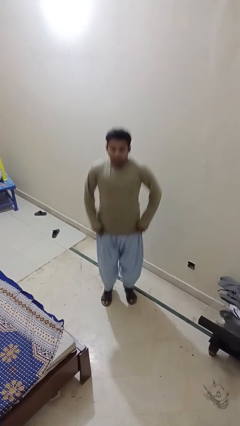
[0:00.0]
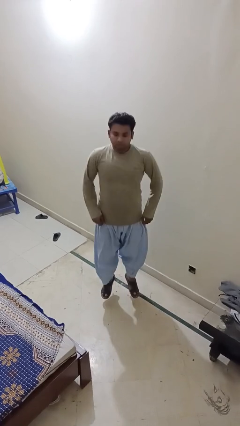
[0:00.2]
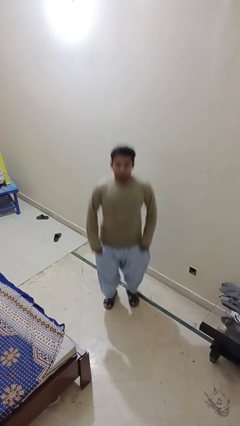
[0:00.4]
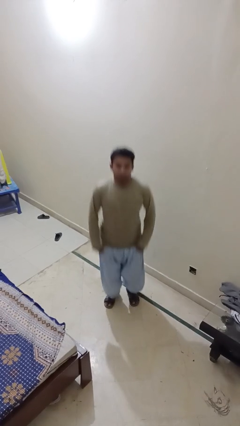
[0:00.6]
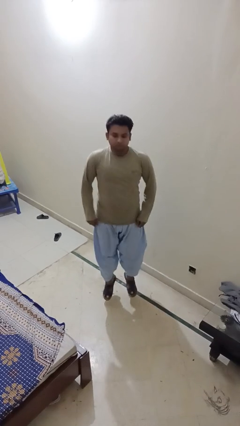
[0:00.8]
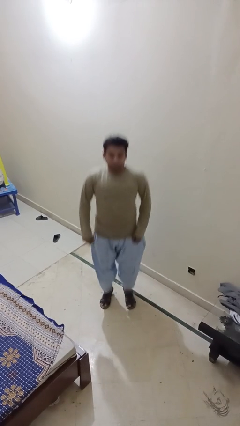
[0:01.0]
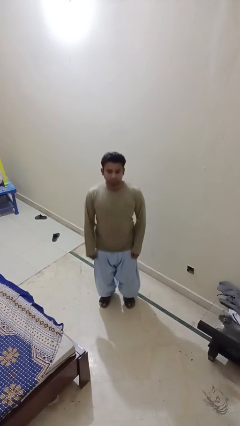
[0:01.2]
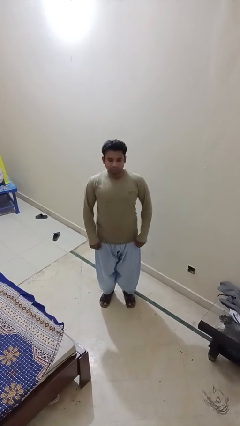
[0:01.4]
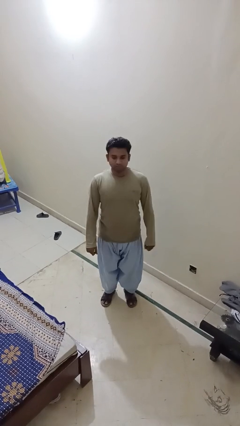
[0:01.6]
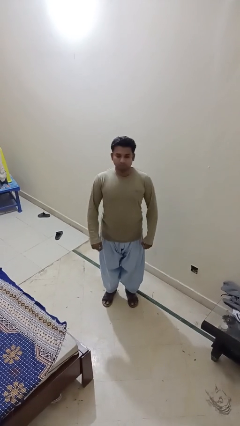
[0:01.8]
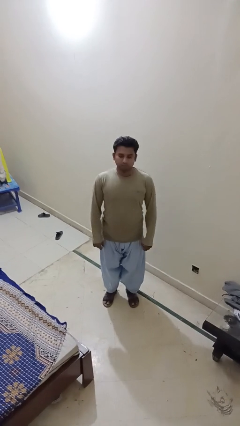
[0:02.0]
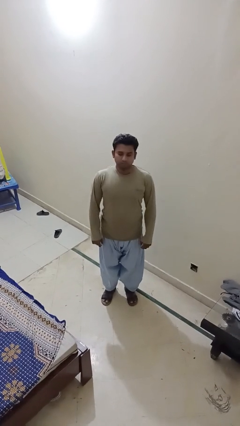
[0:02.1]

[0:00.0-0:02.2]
person jumps

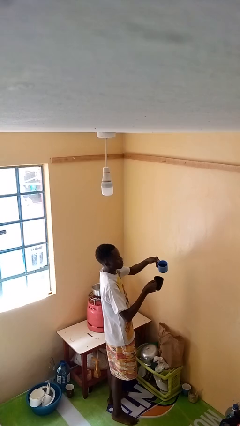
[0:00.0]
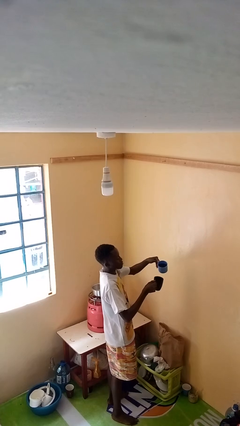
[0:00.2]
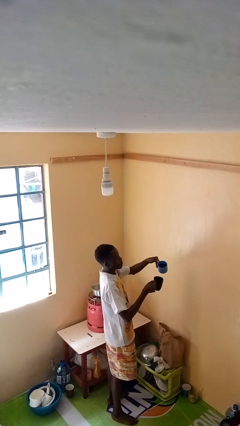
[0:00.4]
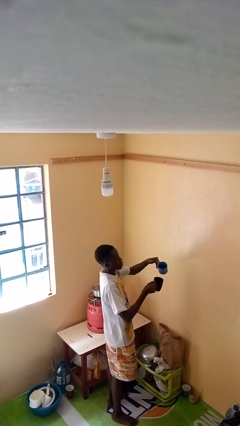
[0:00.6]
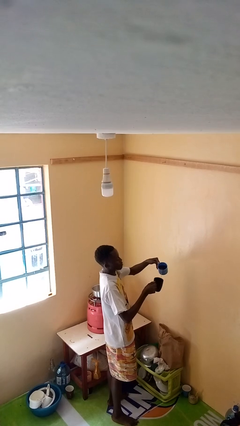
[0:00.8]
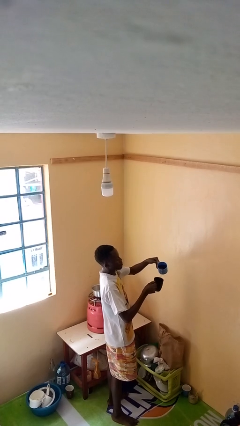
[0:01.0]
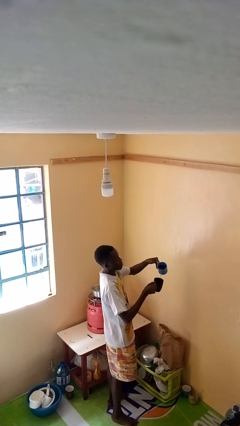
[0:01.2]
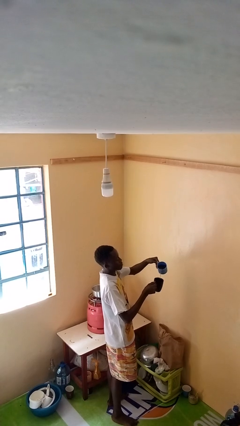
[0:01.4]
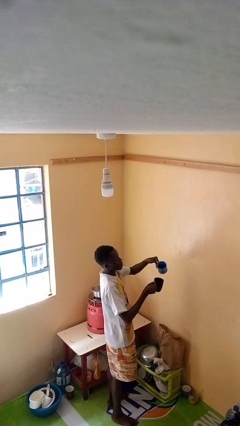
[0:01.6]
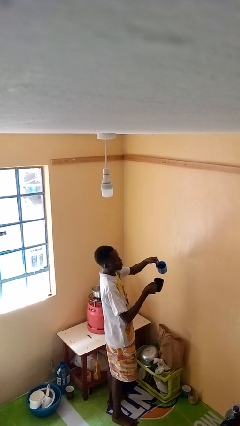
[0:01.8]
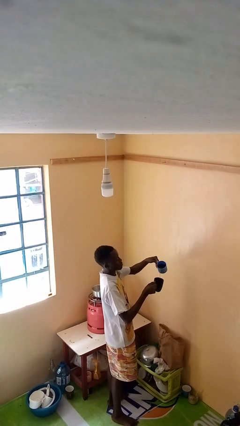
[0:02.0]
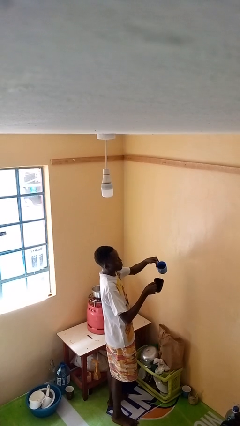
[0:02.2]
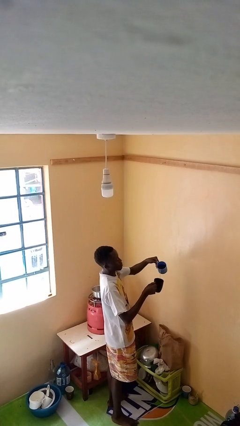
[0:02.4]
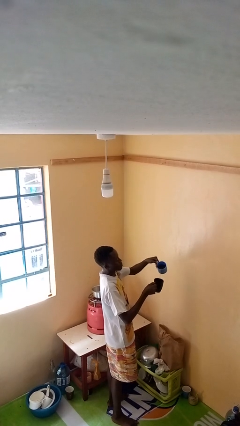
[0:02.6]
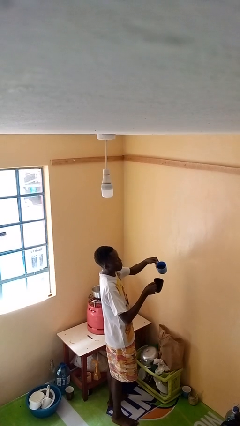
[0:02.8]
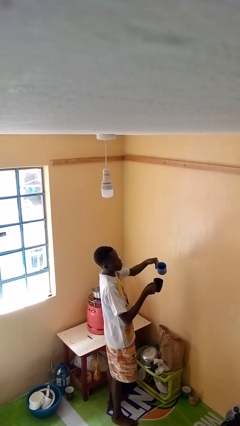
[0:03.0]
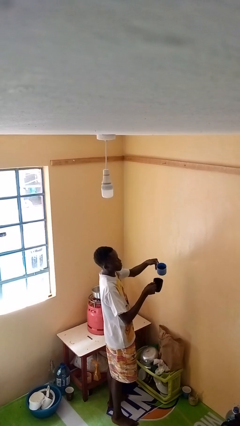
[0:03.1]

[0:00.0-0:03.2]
person pours coffee into mug

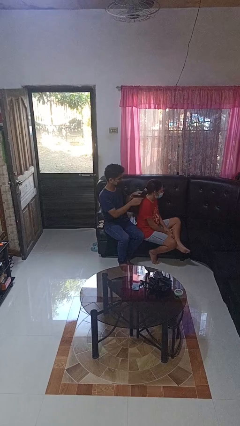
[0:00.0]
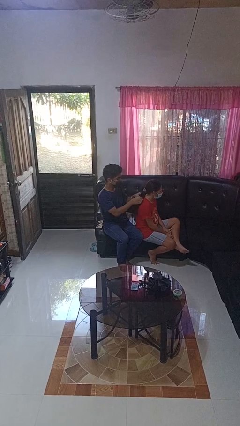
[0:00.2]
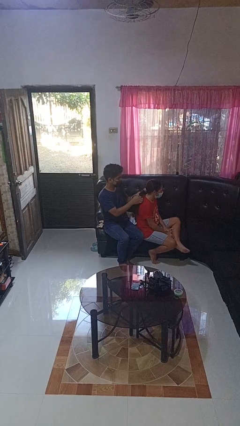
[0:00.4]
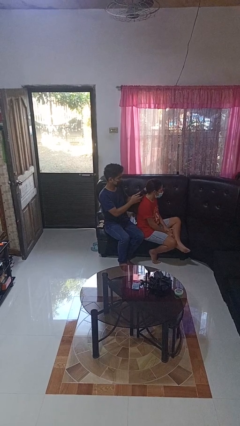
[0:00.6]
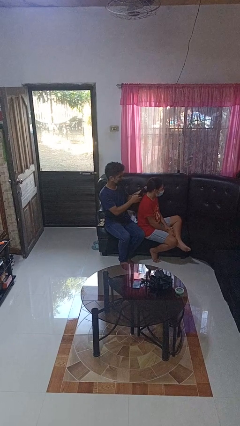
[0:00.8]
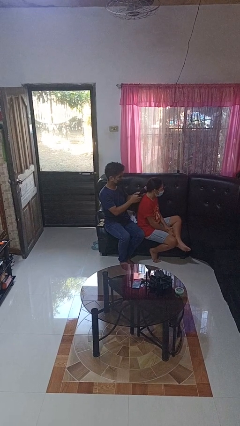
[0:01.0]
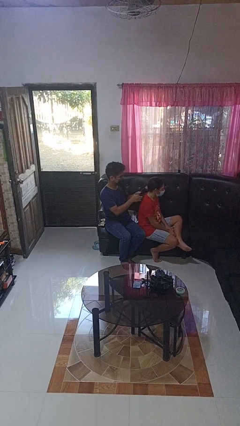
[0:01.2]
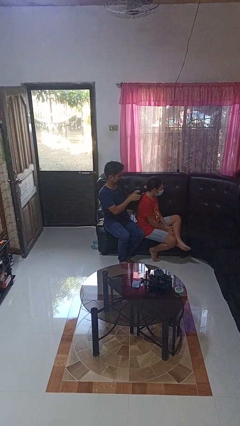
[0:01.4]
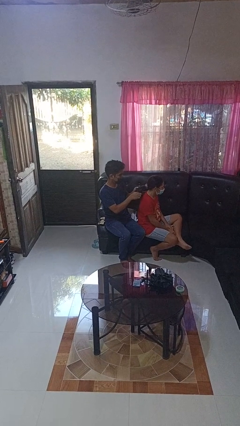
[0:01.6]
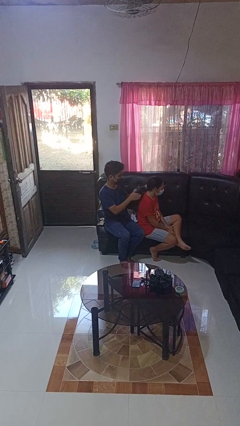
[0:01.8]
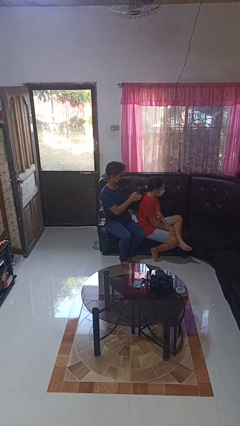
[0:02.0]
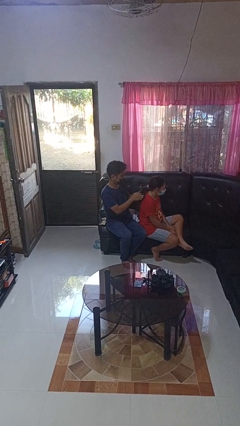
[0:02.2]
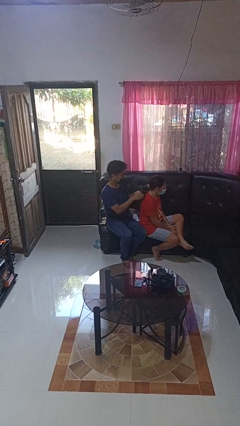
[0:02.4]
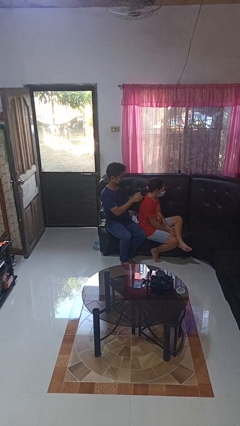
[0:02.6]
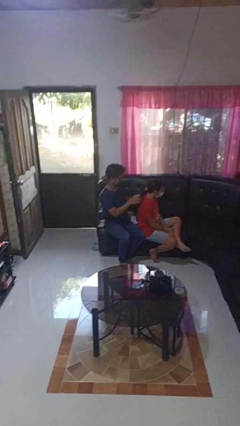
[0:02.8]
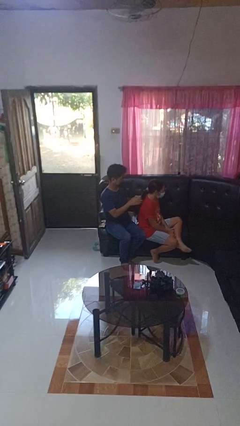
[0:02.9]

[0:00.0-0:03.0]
person braids hair of person

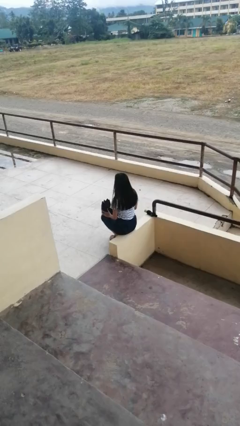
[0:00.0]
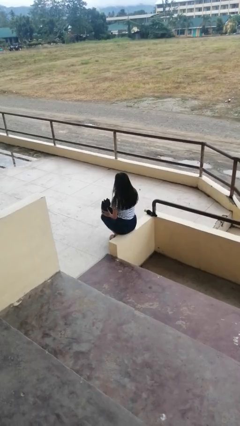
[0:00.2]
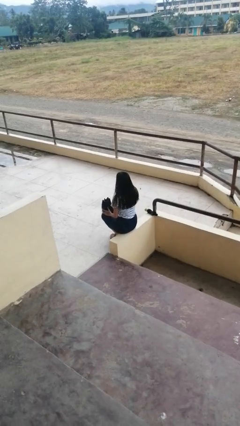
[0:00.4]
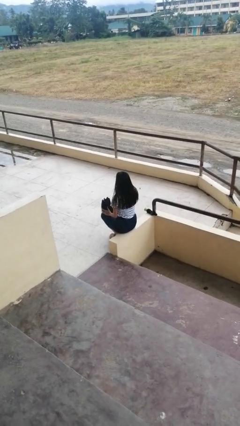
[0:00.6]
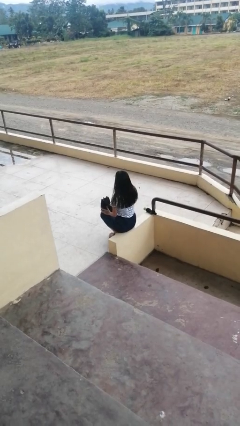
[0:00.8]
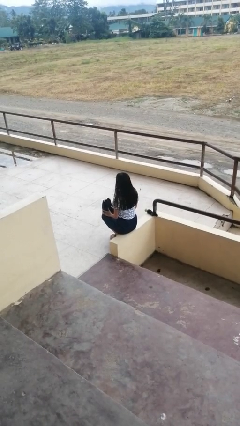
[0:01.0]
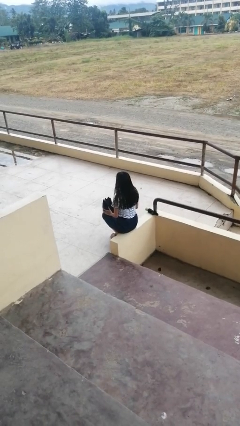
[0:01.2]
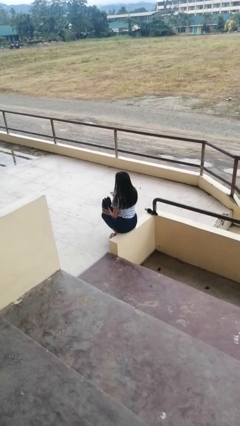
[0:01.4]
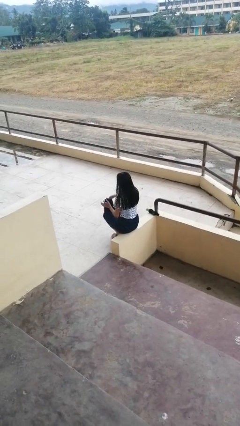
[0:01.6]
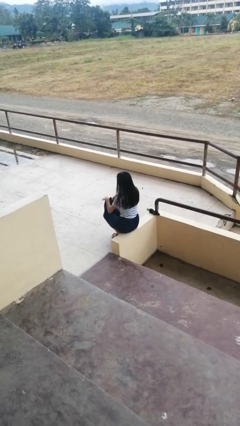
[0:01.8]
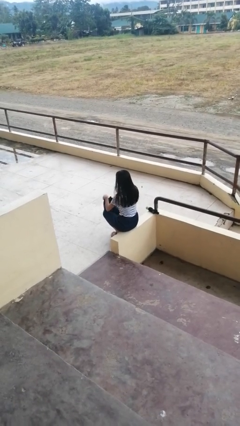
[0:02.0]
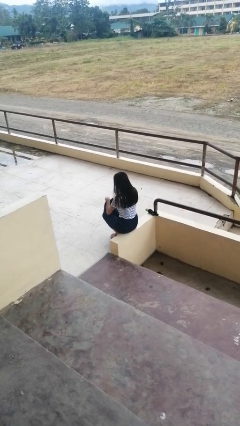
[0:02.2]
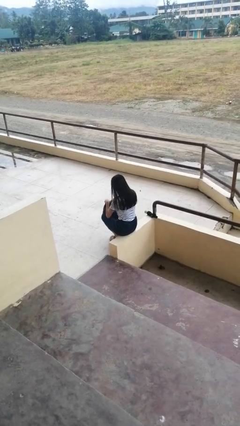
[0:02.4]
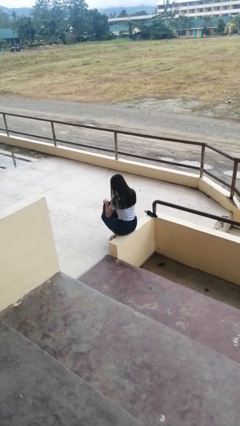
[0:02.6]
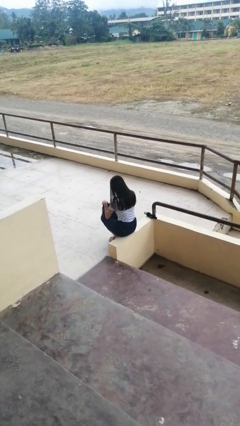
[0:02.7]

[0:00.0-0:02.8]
person searches in bag

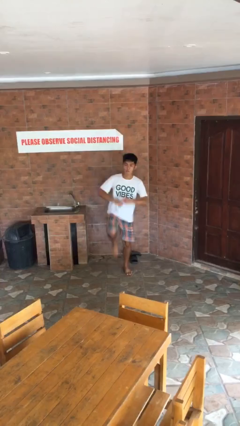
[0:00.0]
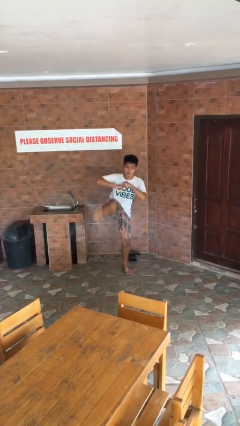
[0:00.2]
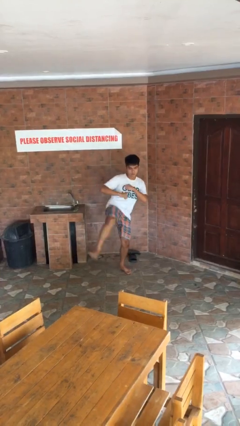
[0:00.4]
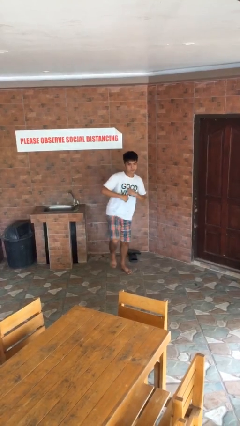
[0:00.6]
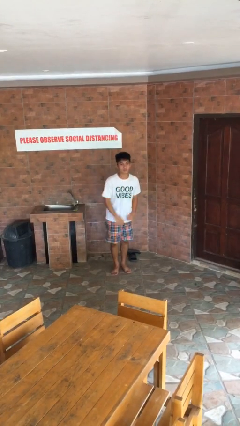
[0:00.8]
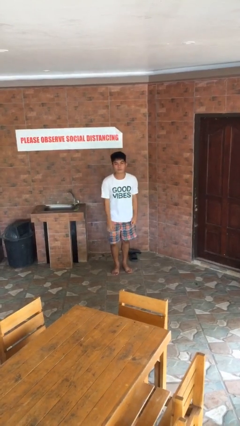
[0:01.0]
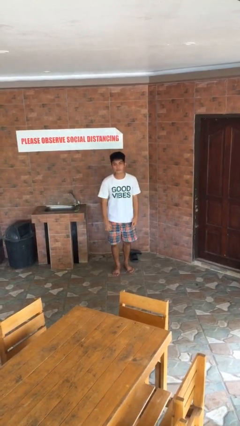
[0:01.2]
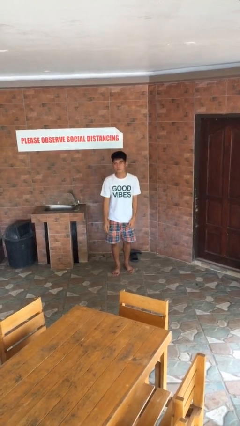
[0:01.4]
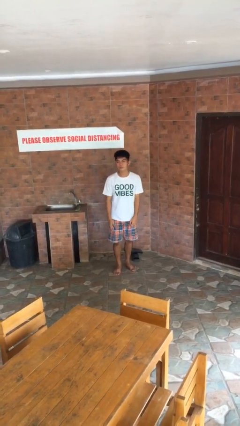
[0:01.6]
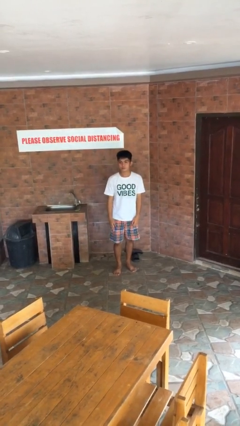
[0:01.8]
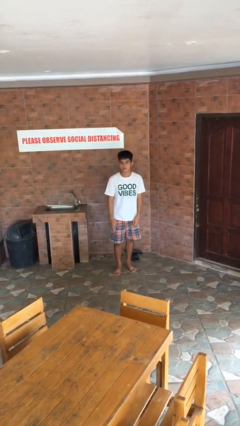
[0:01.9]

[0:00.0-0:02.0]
person karate kicks

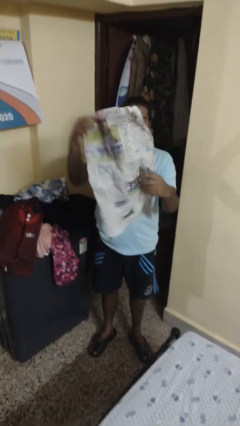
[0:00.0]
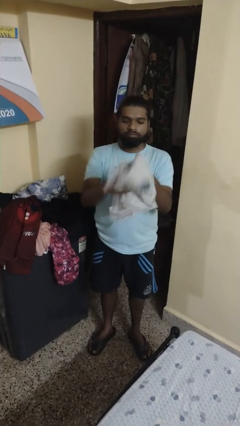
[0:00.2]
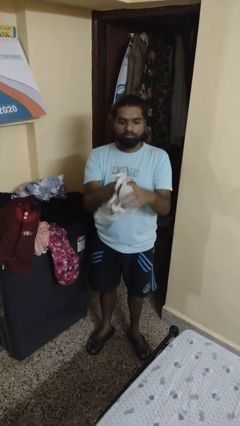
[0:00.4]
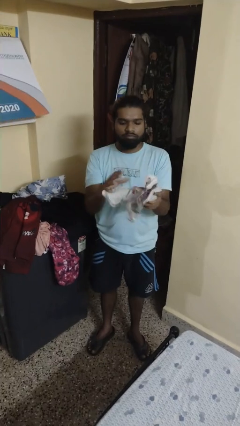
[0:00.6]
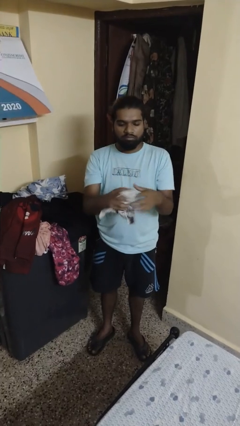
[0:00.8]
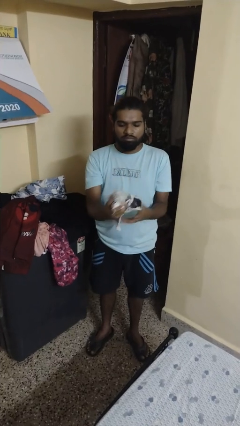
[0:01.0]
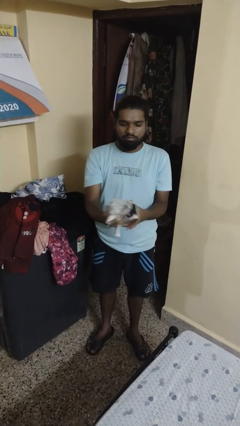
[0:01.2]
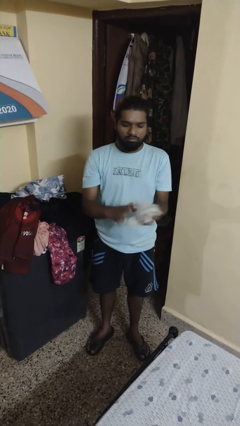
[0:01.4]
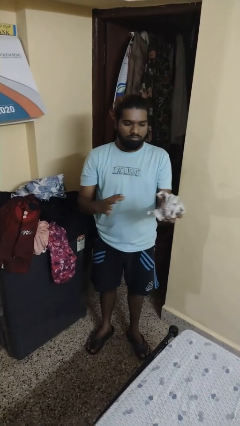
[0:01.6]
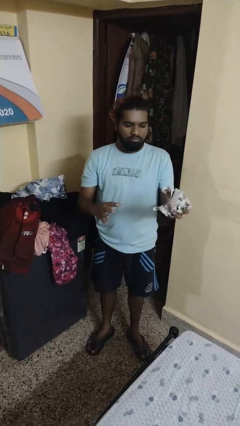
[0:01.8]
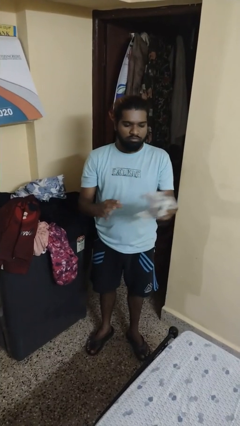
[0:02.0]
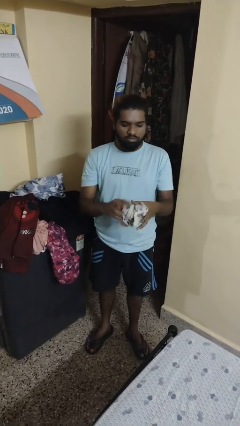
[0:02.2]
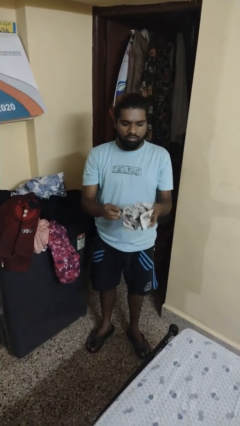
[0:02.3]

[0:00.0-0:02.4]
person crumples paper

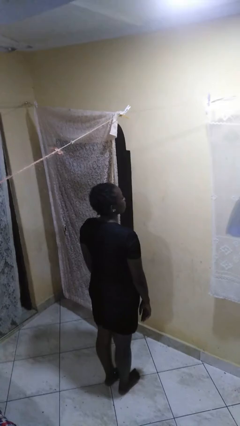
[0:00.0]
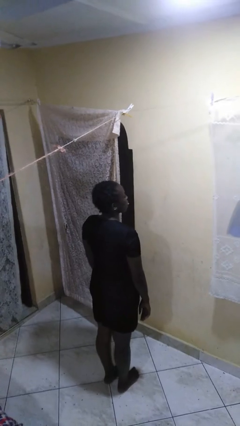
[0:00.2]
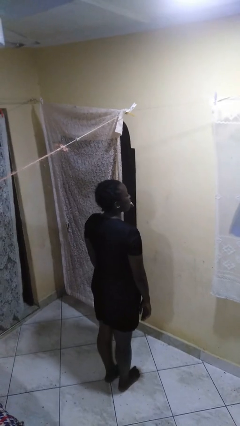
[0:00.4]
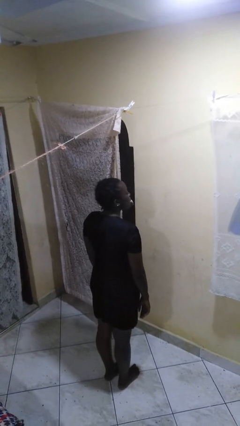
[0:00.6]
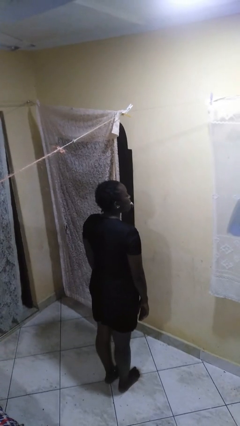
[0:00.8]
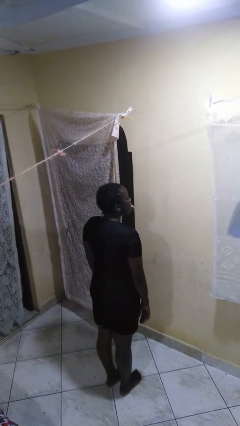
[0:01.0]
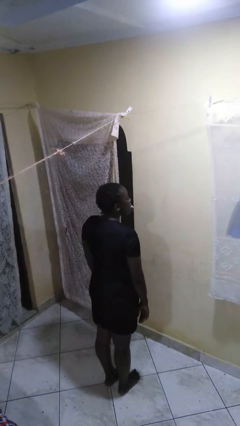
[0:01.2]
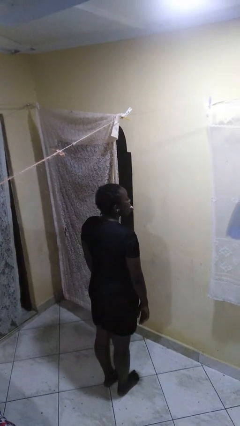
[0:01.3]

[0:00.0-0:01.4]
person sticks out tongue
